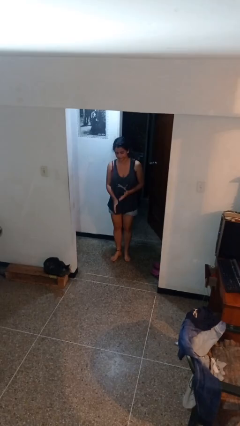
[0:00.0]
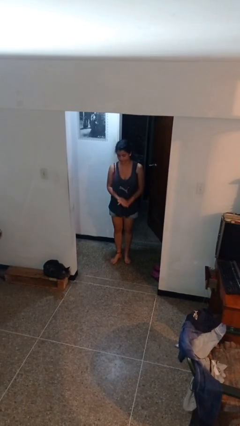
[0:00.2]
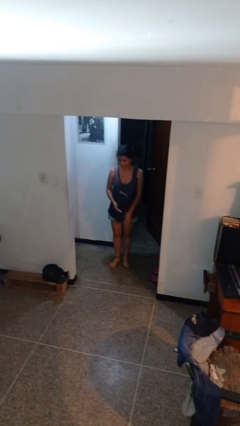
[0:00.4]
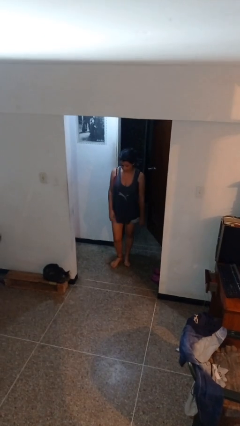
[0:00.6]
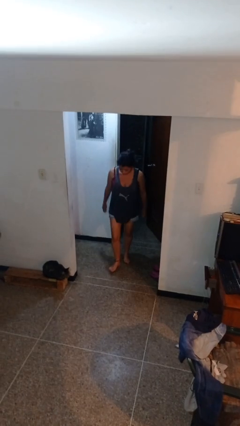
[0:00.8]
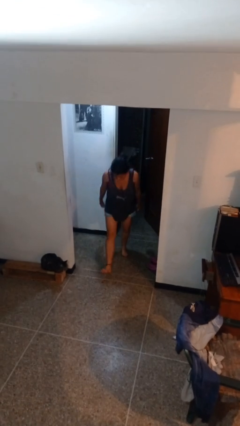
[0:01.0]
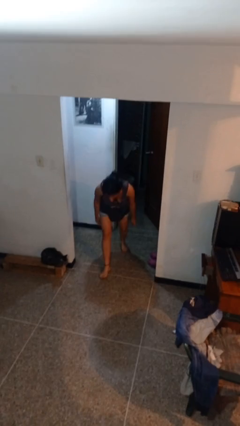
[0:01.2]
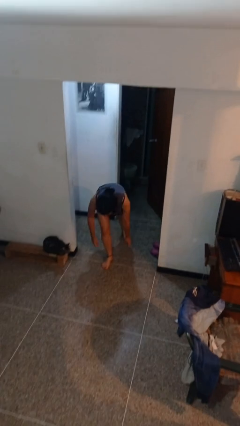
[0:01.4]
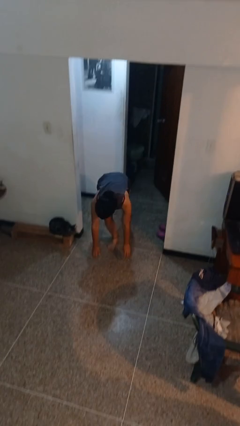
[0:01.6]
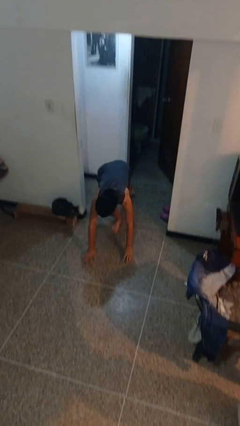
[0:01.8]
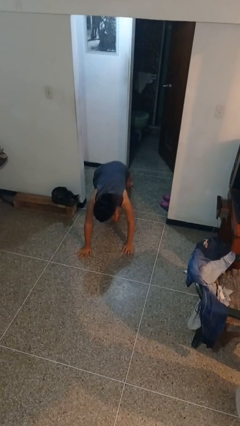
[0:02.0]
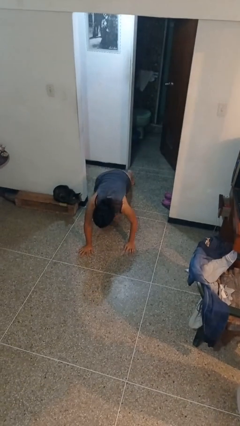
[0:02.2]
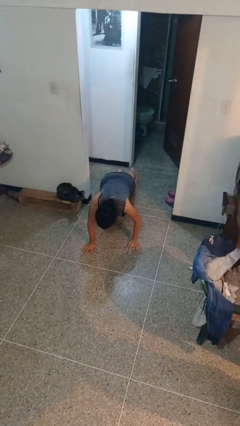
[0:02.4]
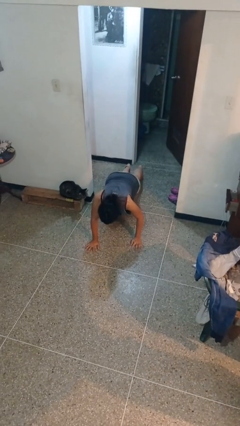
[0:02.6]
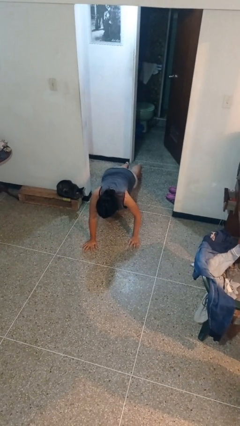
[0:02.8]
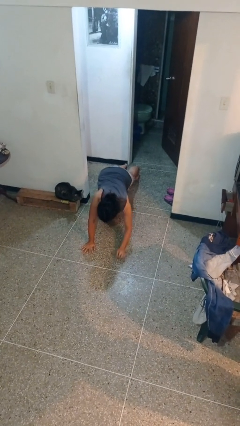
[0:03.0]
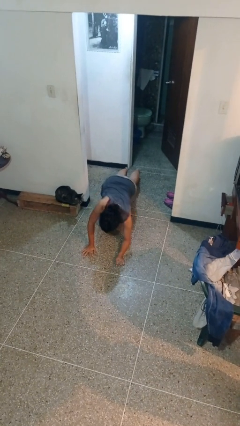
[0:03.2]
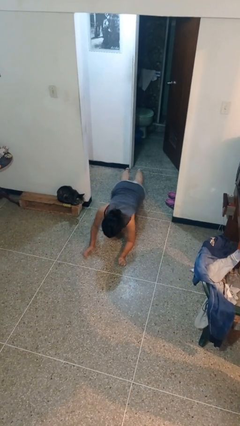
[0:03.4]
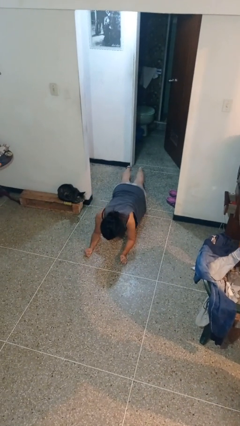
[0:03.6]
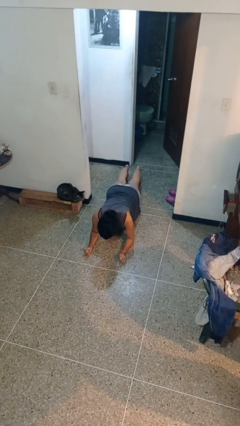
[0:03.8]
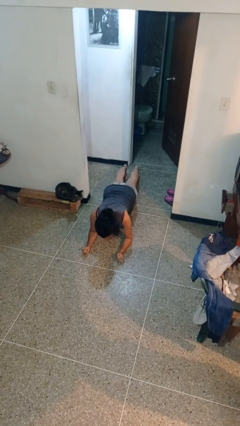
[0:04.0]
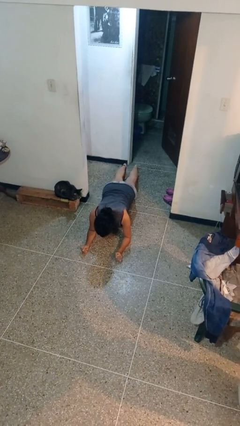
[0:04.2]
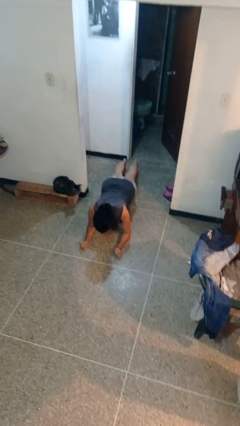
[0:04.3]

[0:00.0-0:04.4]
person exercises with plank

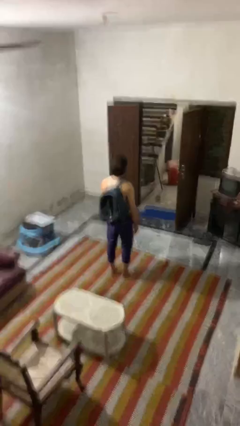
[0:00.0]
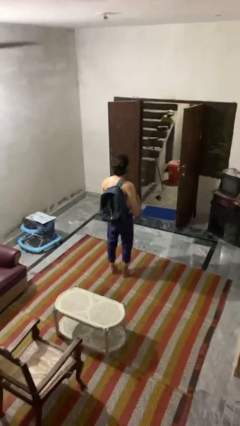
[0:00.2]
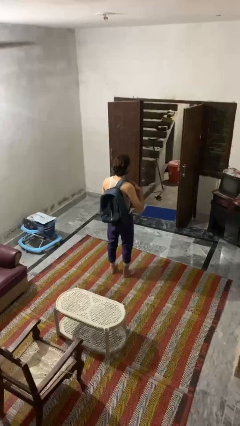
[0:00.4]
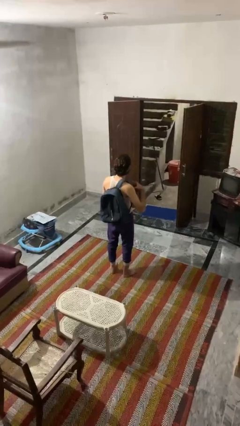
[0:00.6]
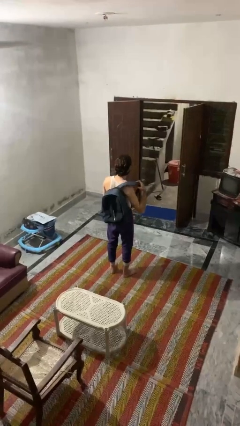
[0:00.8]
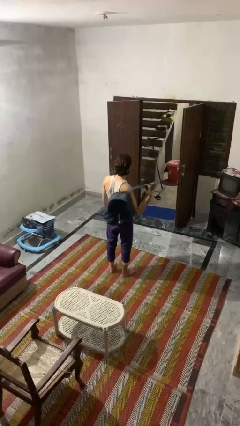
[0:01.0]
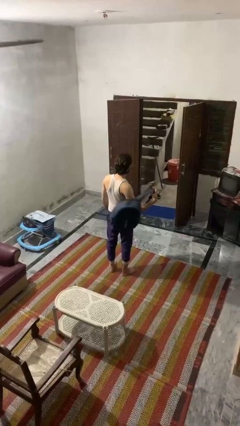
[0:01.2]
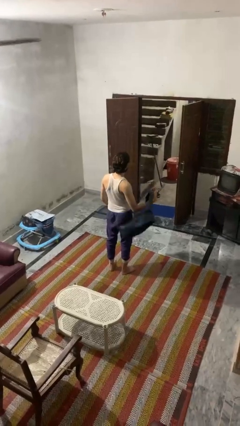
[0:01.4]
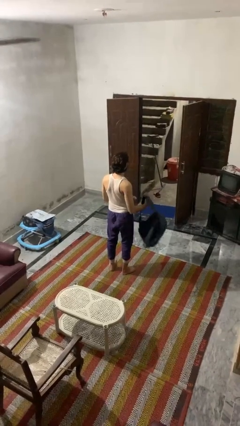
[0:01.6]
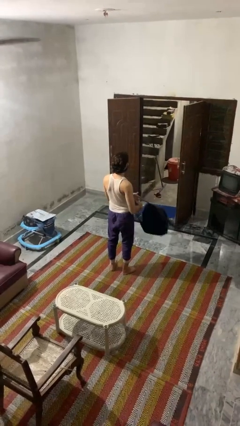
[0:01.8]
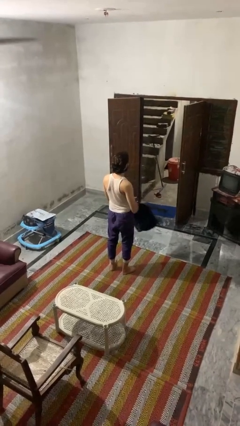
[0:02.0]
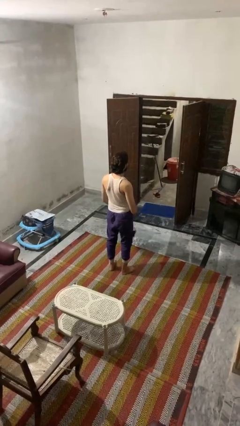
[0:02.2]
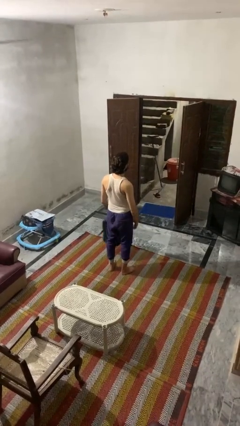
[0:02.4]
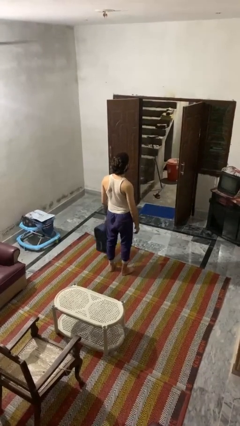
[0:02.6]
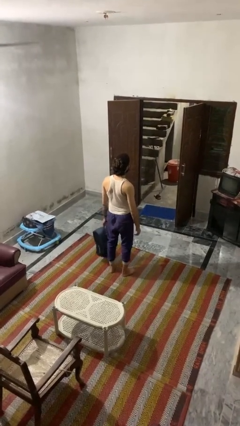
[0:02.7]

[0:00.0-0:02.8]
person takes off backpack

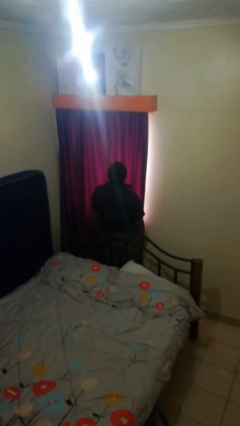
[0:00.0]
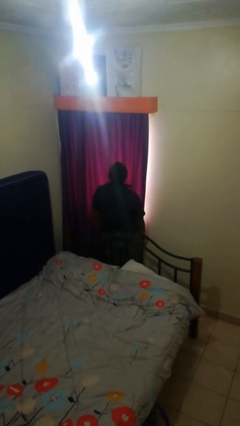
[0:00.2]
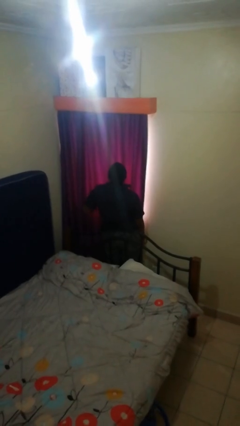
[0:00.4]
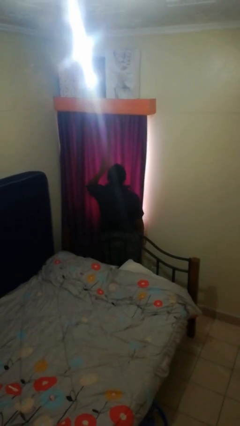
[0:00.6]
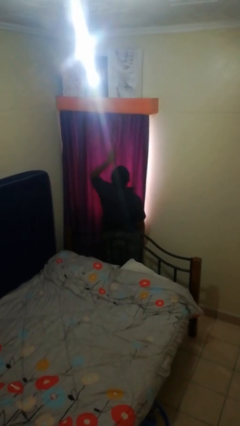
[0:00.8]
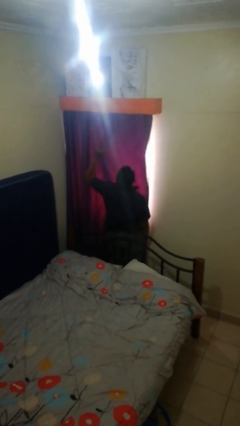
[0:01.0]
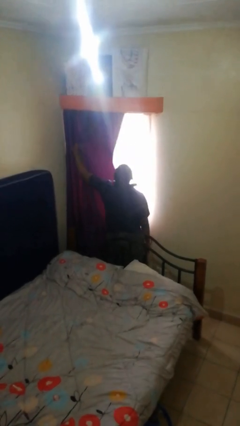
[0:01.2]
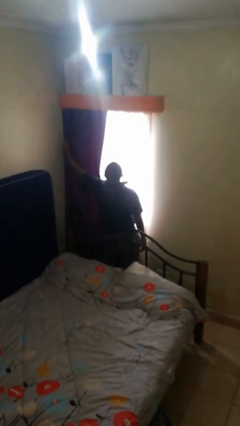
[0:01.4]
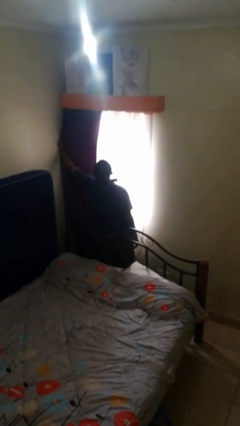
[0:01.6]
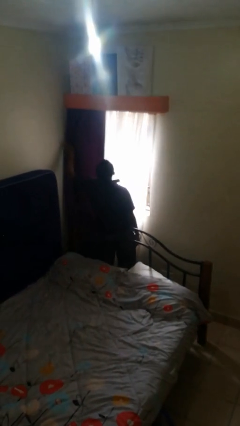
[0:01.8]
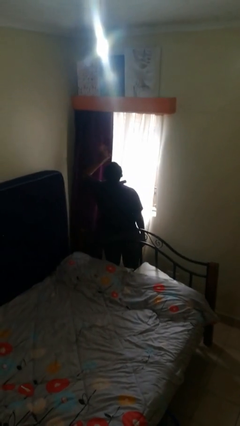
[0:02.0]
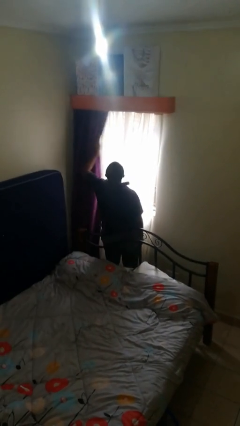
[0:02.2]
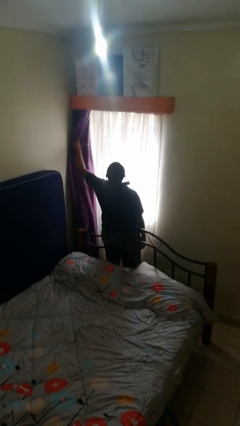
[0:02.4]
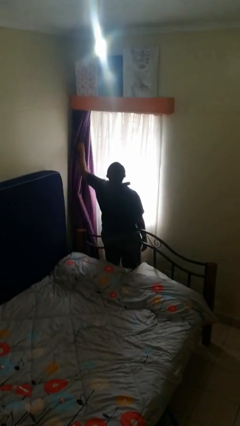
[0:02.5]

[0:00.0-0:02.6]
person opens curtains

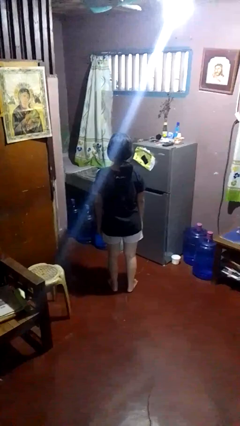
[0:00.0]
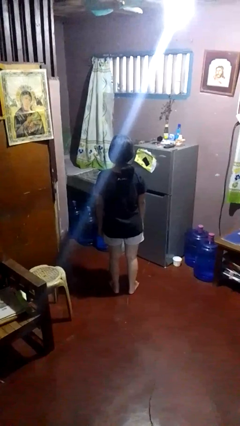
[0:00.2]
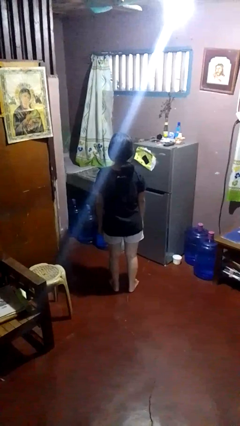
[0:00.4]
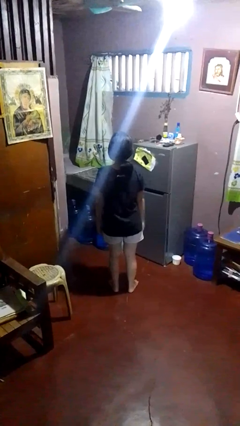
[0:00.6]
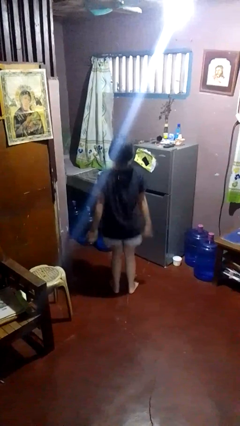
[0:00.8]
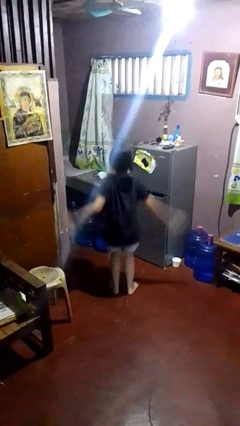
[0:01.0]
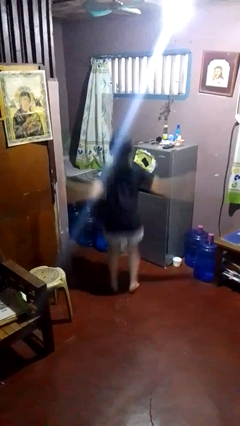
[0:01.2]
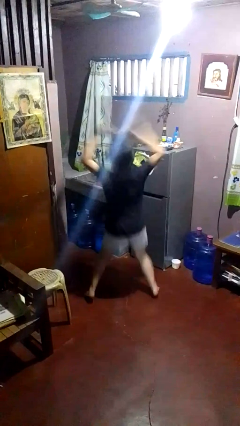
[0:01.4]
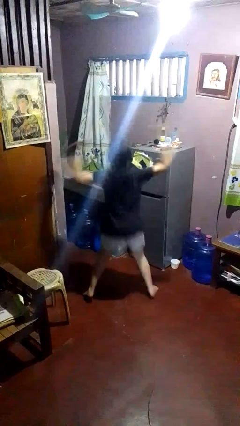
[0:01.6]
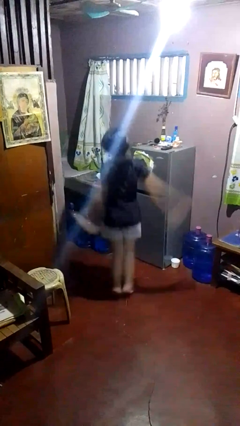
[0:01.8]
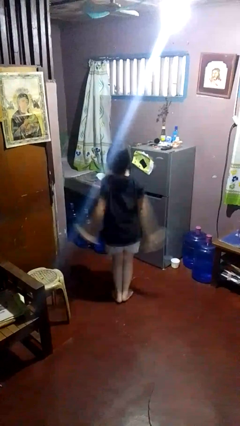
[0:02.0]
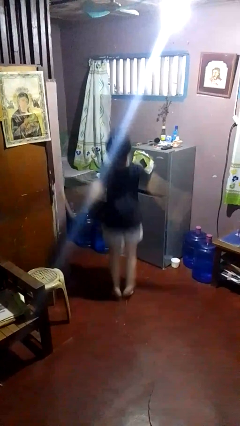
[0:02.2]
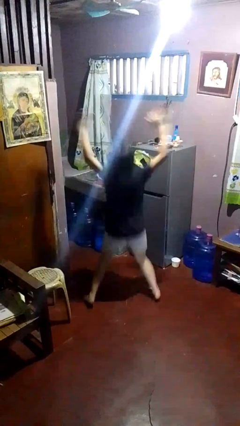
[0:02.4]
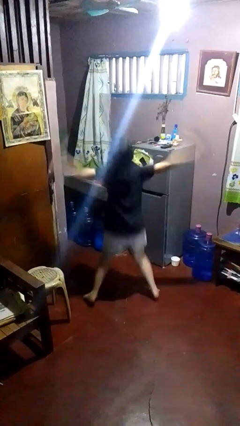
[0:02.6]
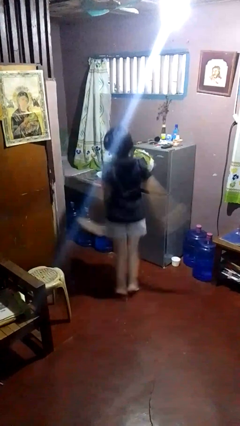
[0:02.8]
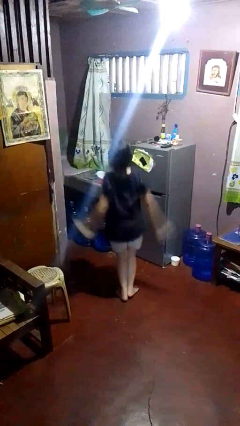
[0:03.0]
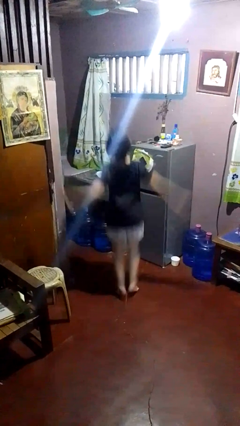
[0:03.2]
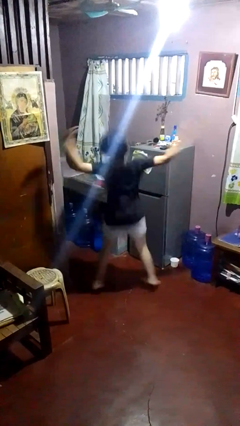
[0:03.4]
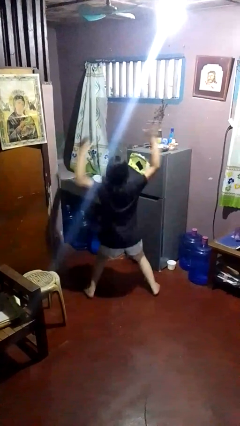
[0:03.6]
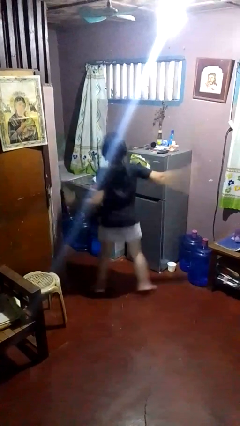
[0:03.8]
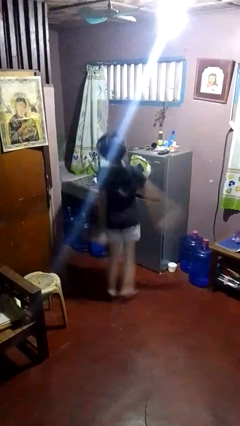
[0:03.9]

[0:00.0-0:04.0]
person exercises with jumping jacks

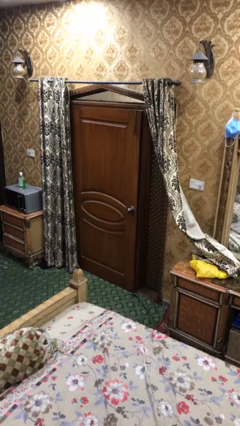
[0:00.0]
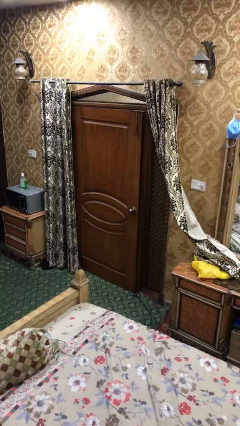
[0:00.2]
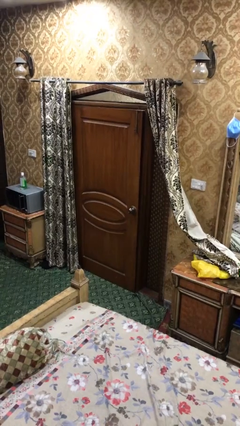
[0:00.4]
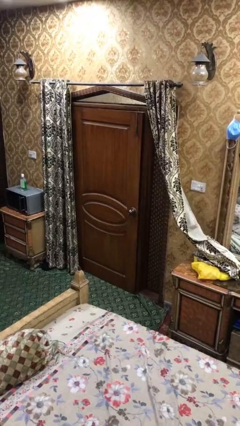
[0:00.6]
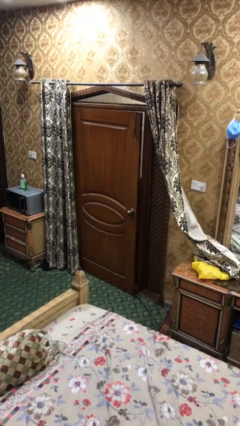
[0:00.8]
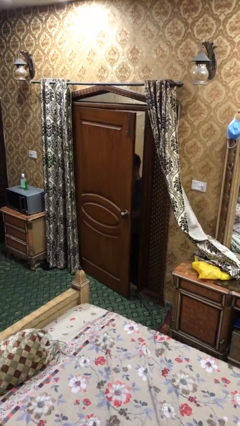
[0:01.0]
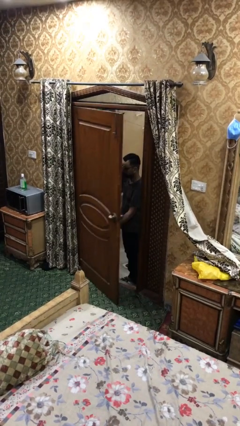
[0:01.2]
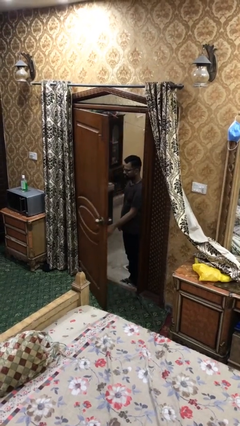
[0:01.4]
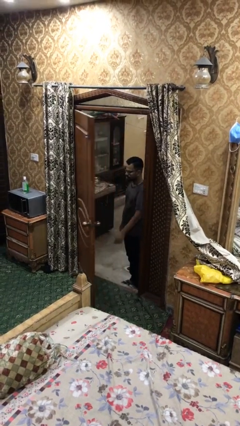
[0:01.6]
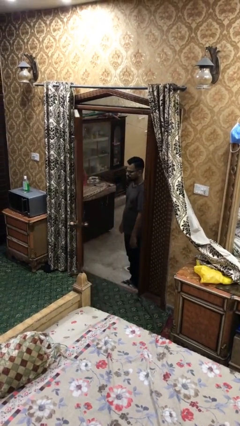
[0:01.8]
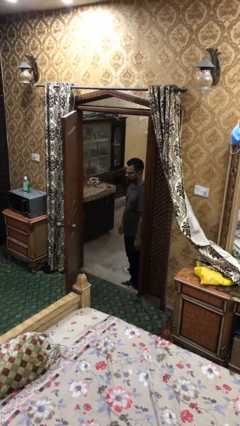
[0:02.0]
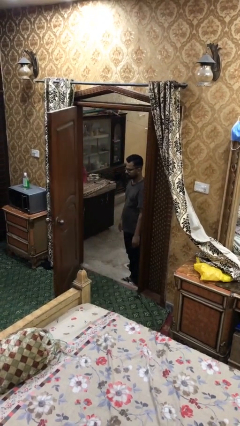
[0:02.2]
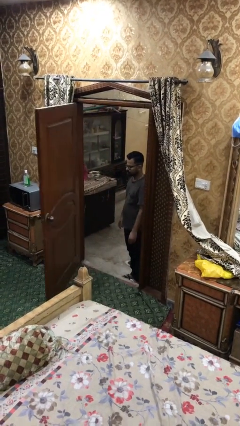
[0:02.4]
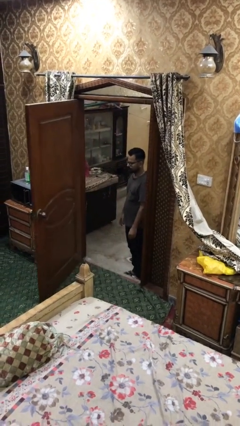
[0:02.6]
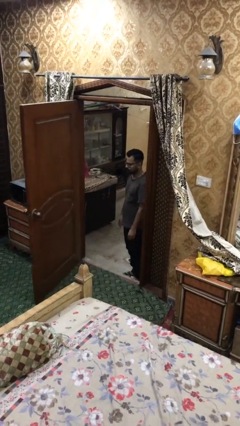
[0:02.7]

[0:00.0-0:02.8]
person opens facility door

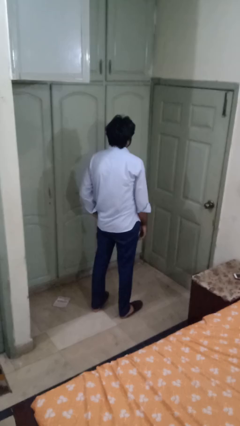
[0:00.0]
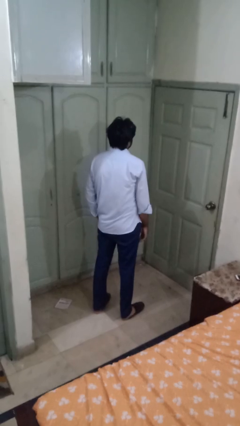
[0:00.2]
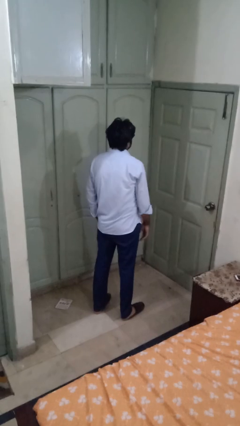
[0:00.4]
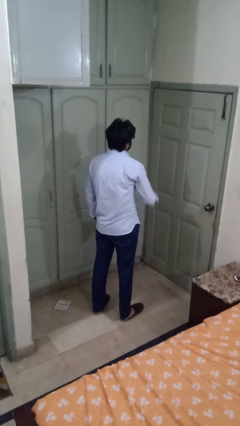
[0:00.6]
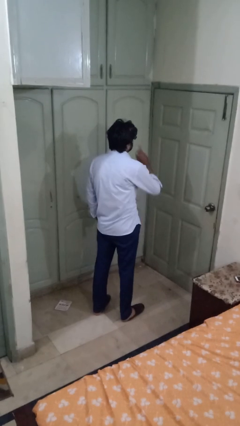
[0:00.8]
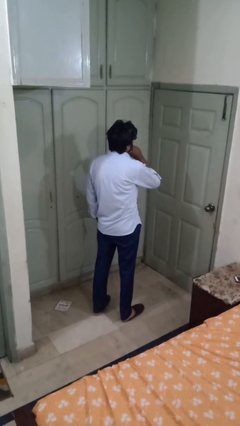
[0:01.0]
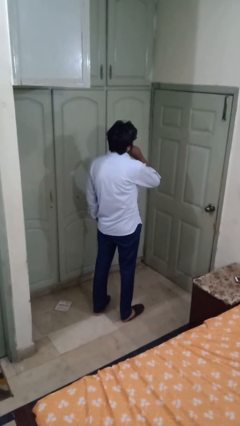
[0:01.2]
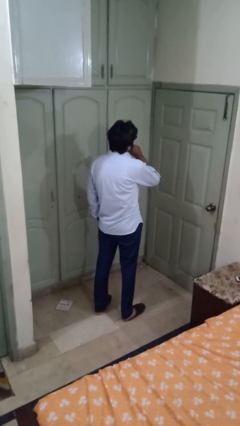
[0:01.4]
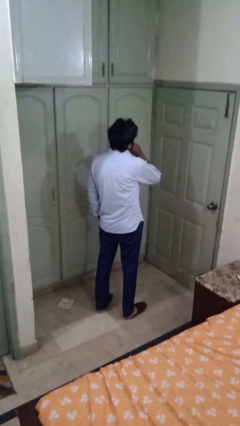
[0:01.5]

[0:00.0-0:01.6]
person gestures be quiet
